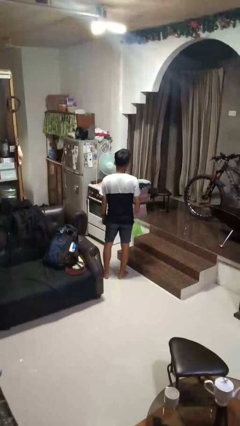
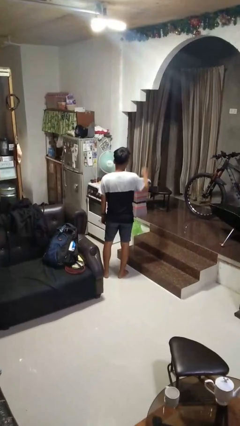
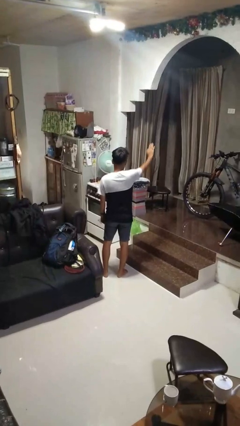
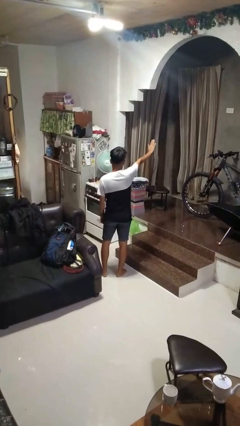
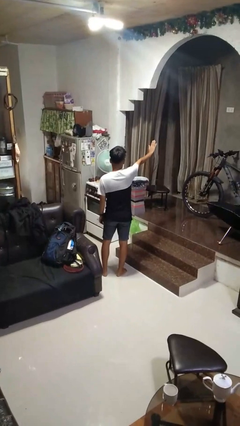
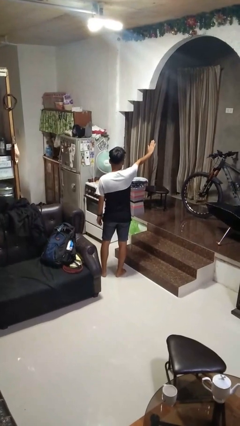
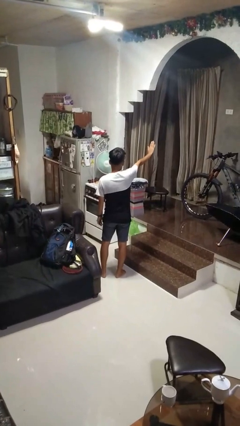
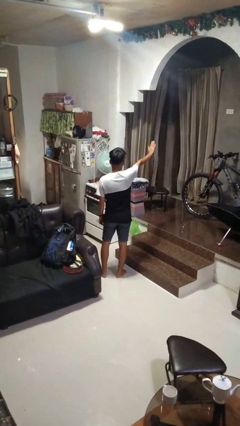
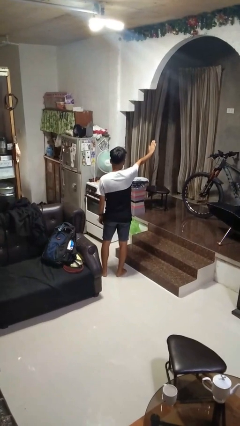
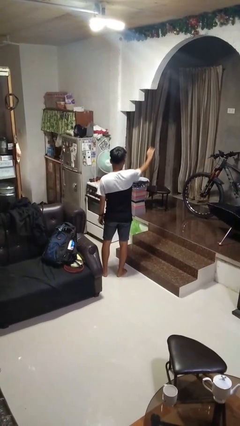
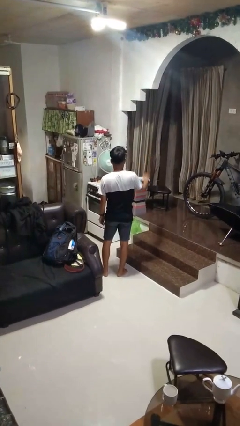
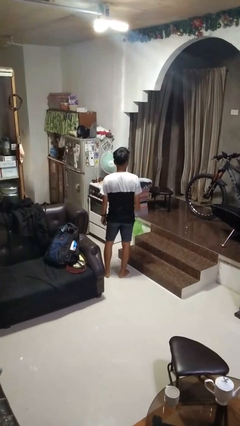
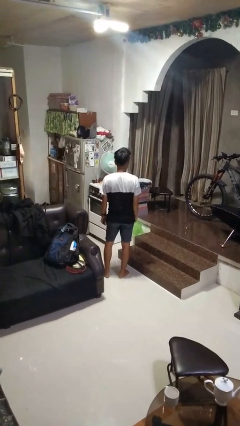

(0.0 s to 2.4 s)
person gestures stop

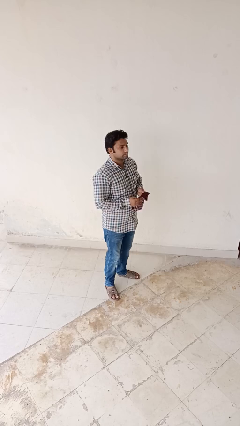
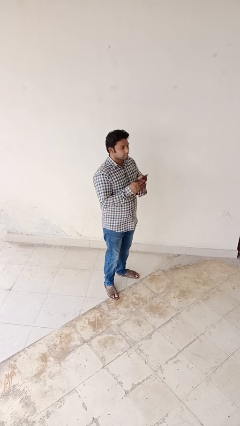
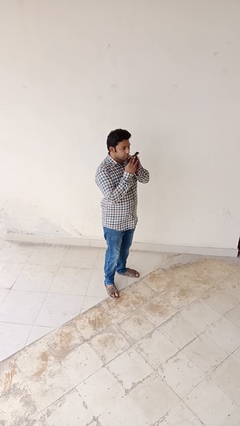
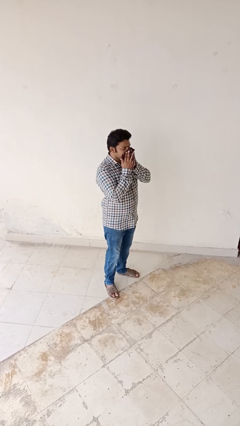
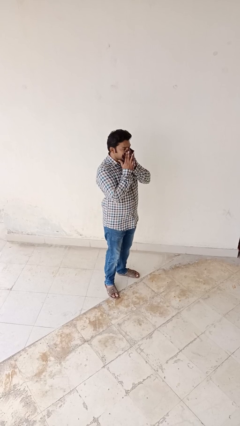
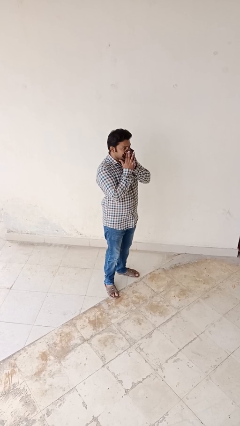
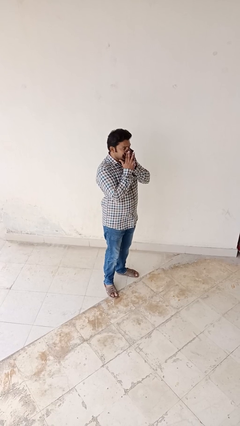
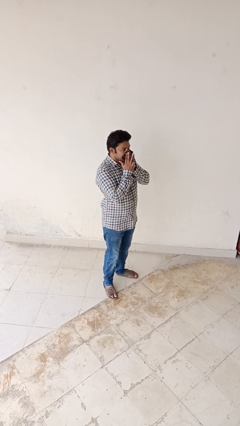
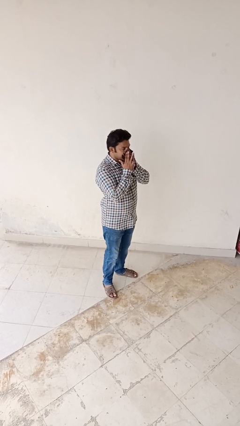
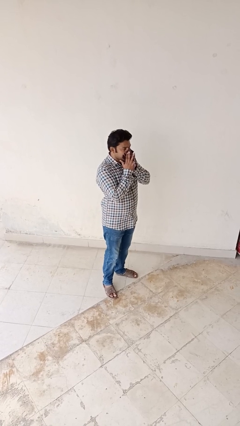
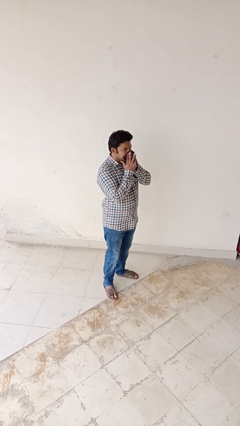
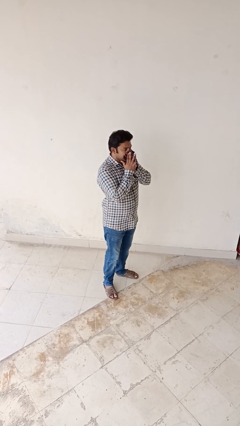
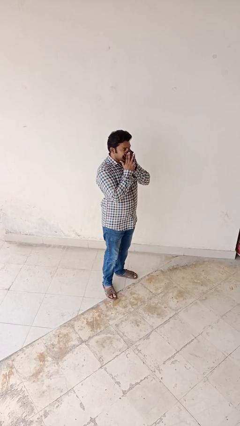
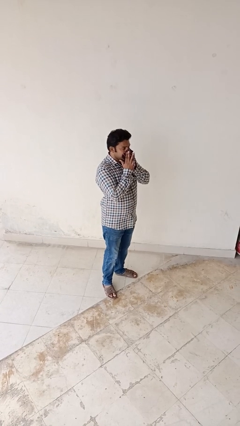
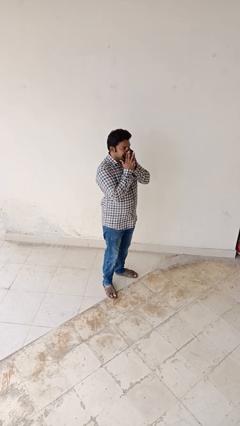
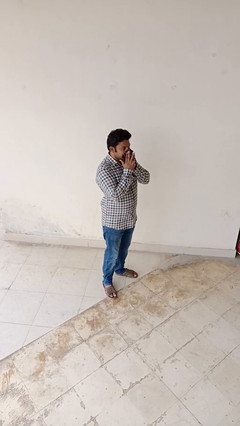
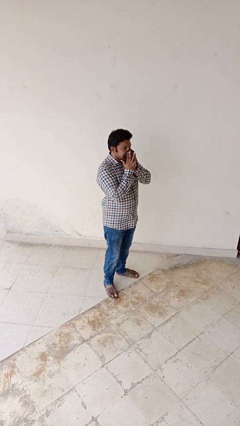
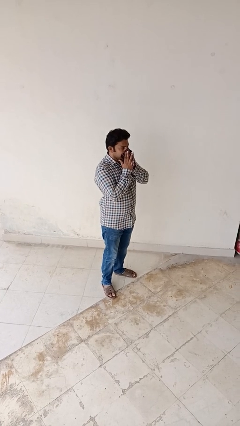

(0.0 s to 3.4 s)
person blows nose

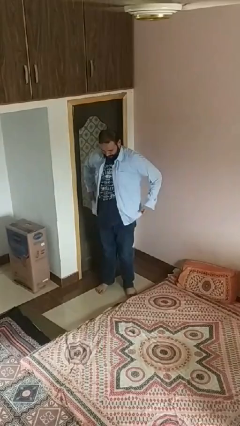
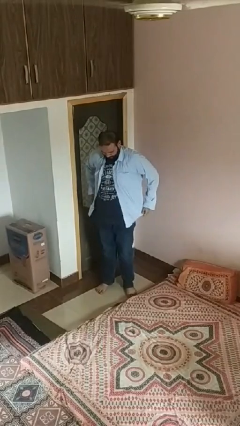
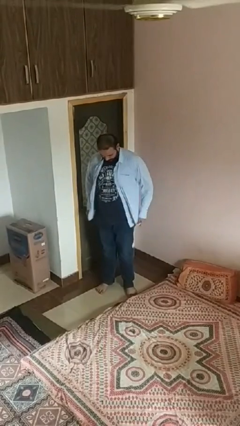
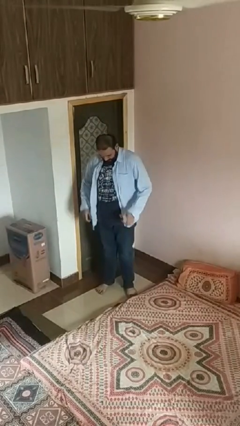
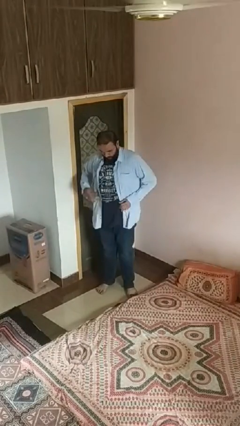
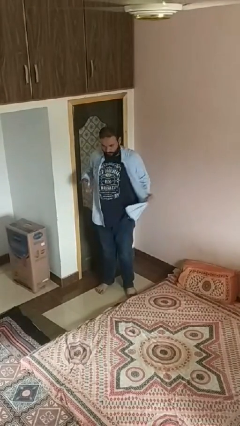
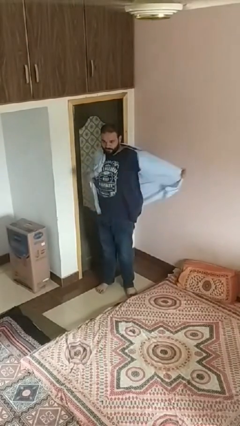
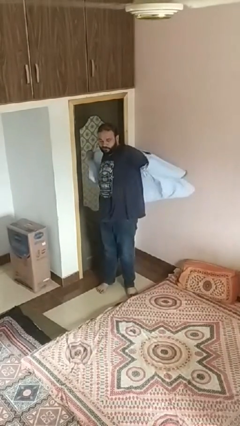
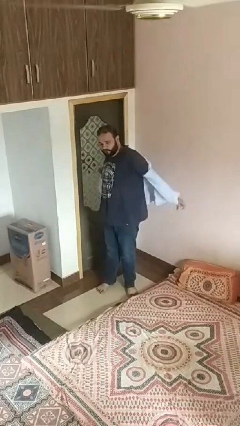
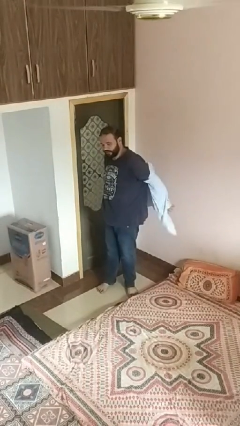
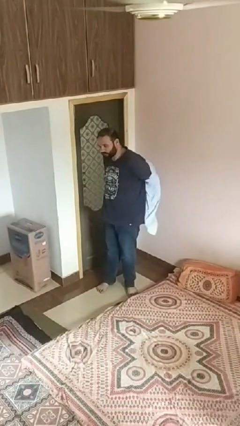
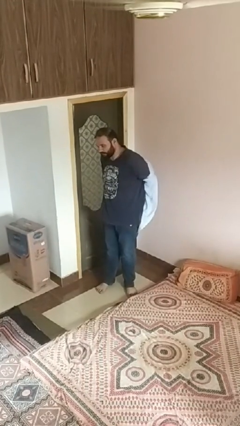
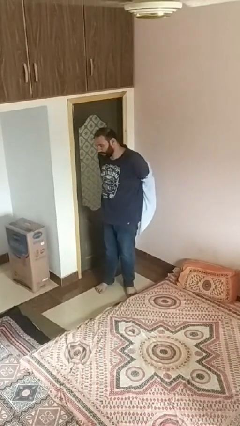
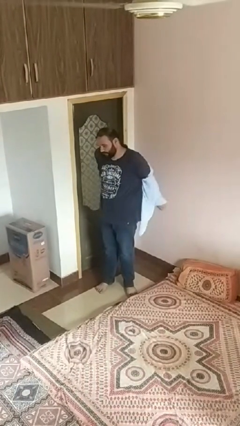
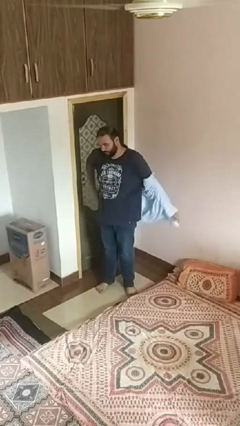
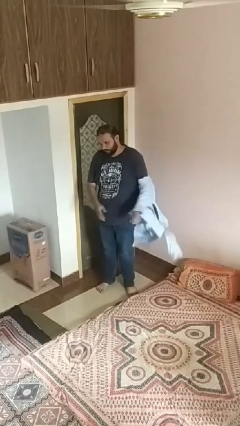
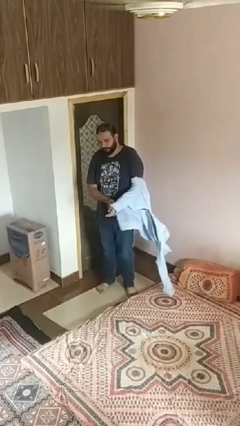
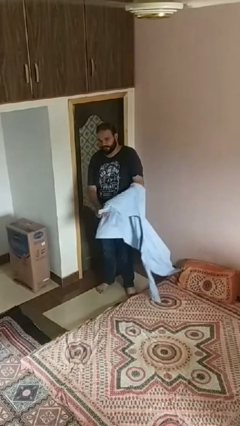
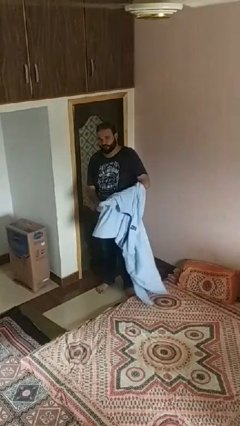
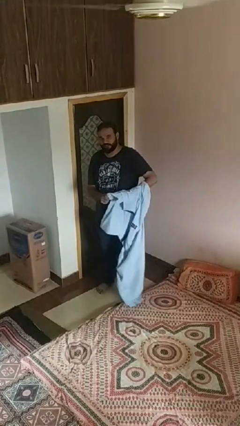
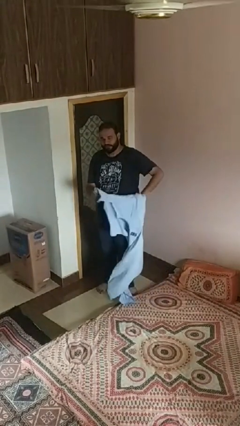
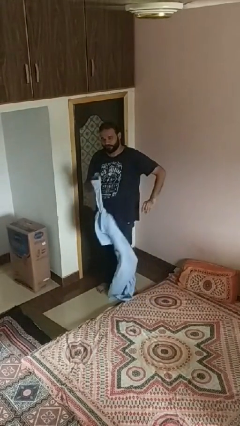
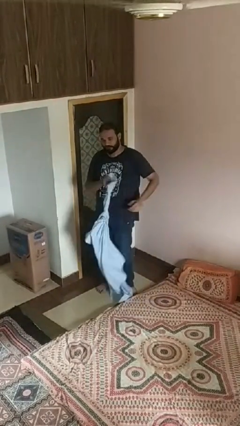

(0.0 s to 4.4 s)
person takes off shirt

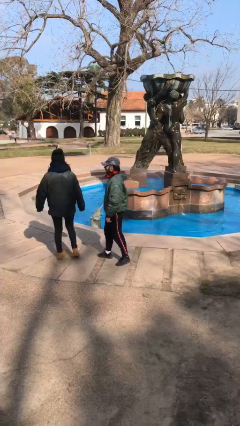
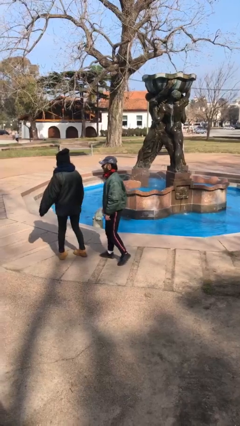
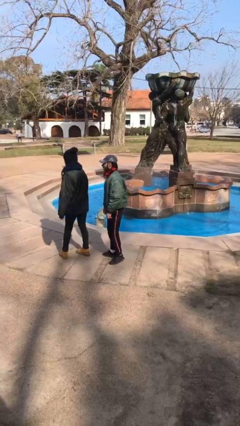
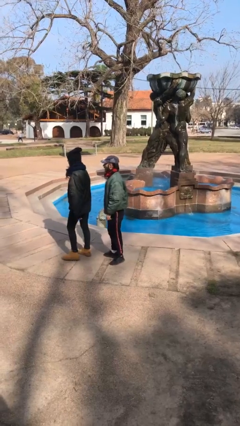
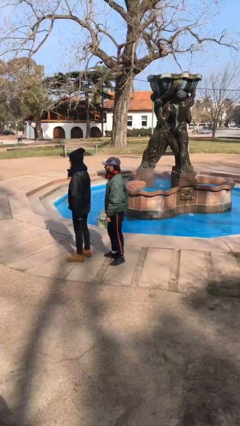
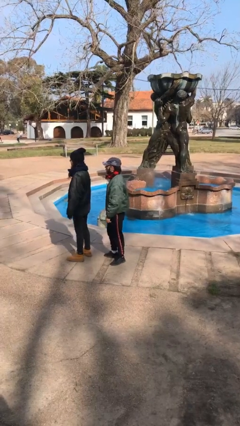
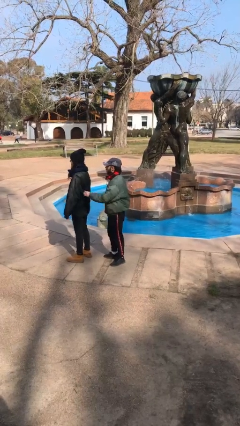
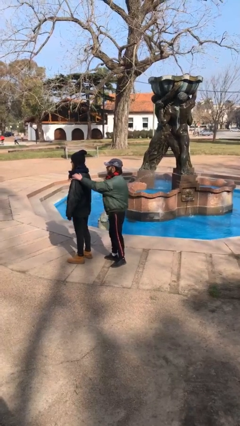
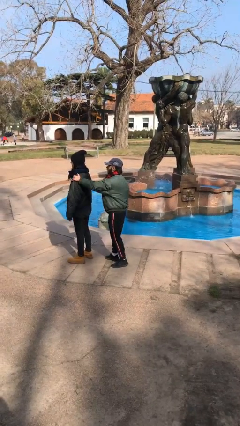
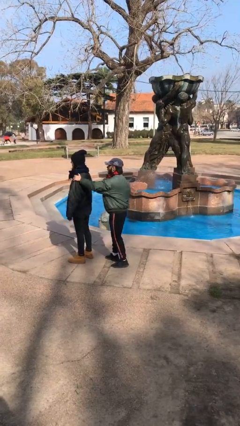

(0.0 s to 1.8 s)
person grabs person by shoulder

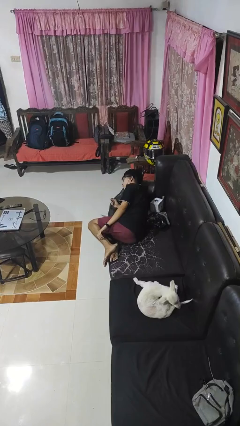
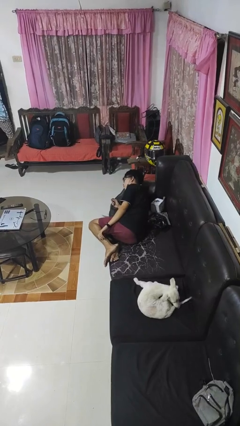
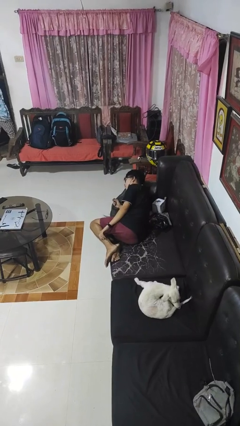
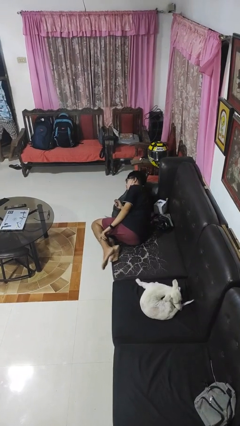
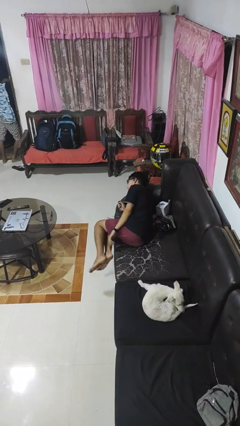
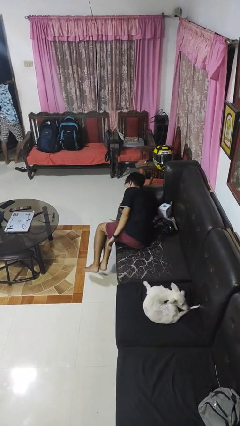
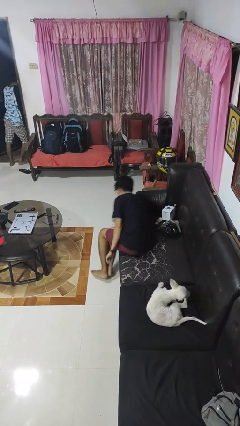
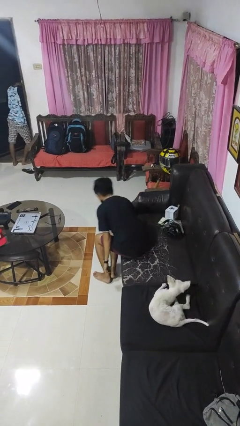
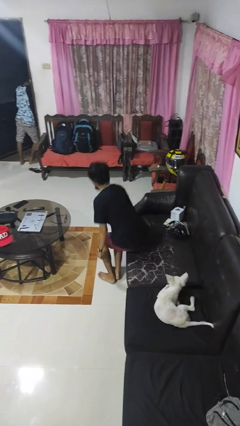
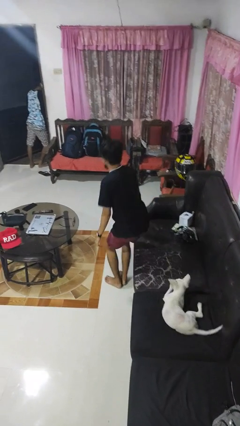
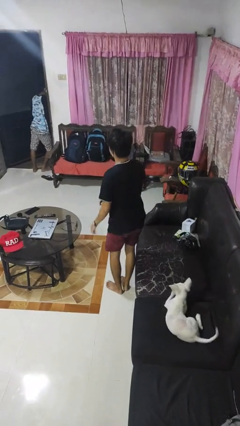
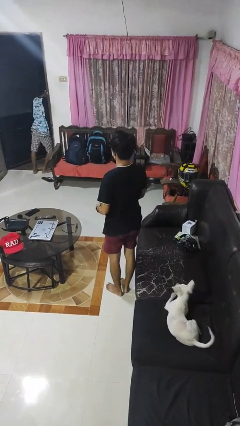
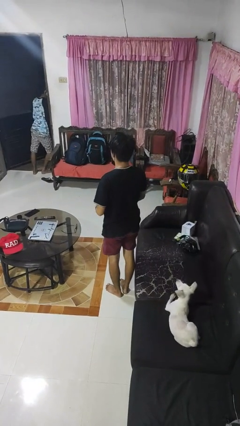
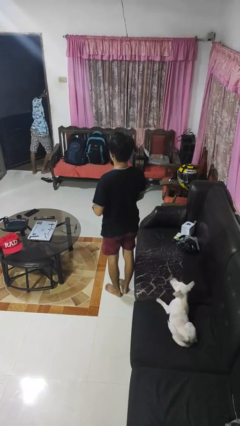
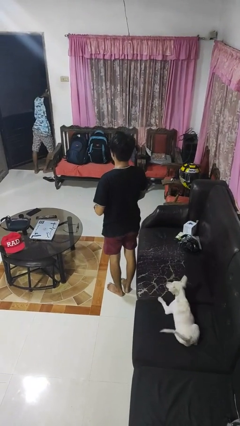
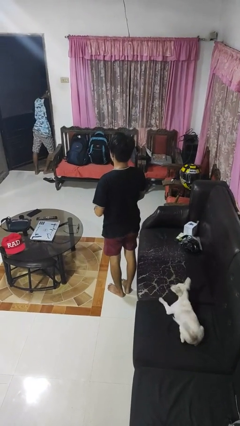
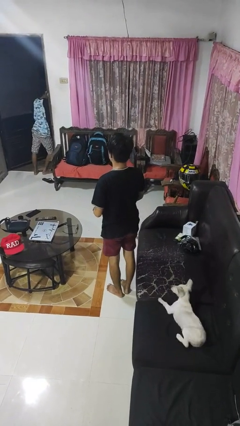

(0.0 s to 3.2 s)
person stands up

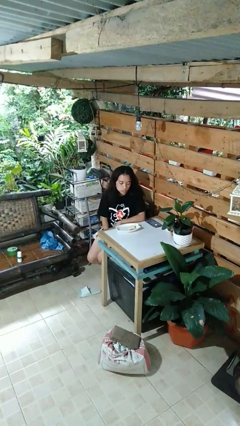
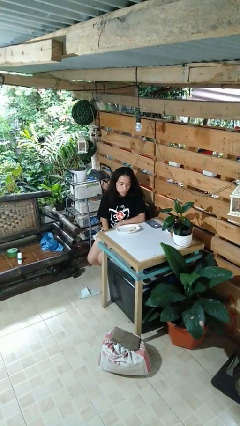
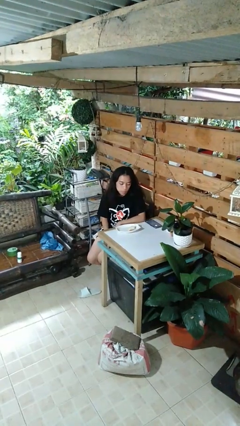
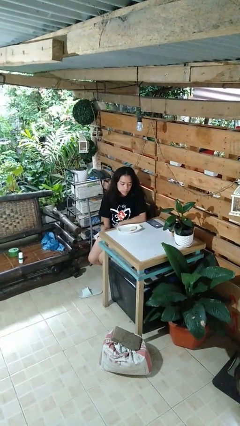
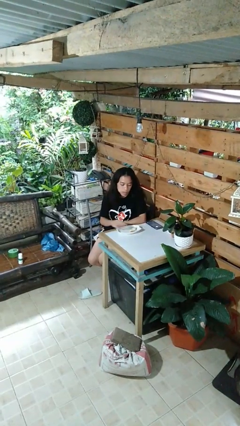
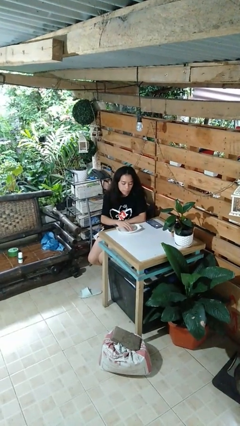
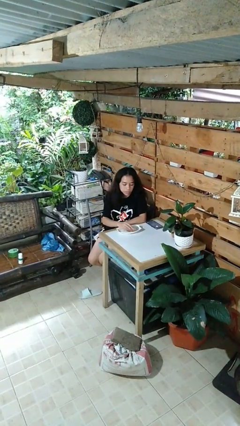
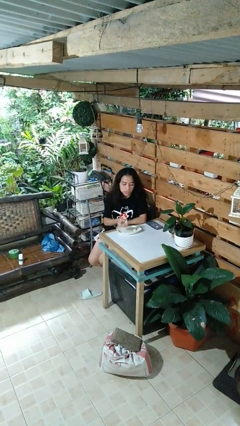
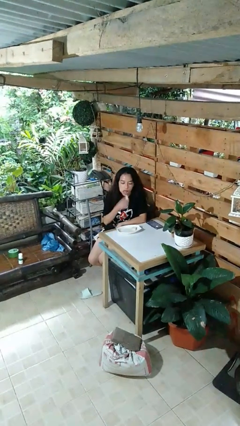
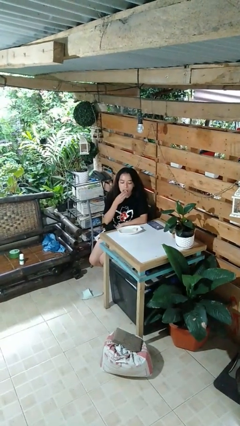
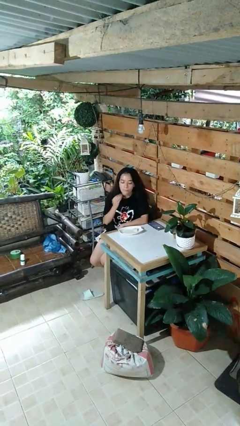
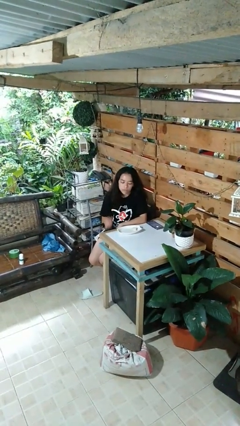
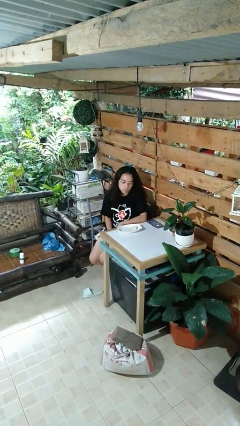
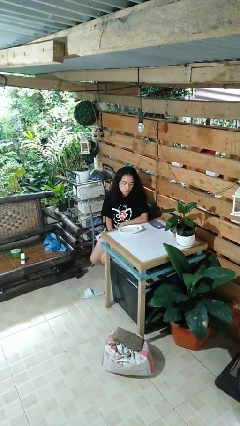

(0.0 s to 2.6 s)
person eats with hands
